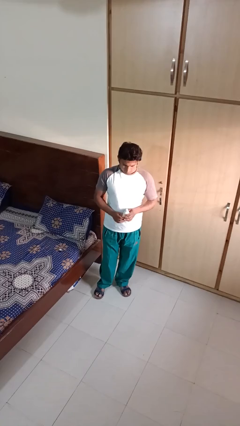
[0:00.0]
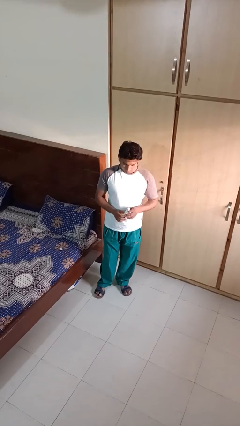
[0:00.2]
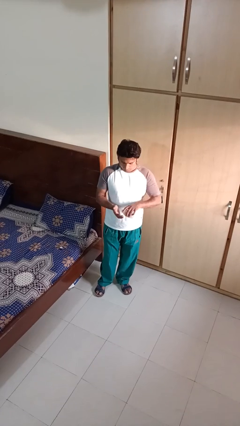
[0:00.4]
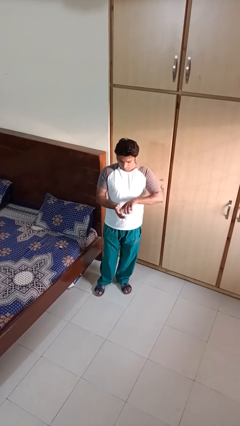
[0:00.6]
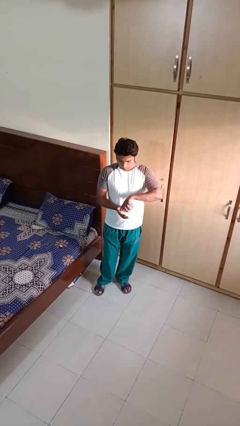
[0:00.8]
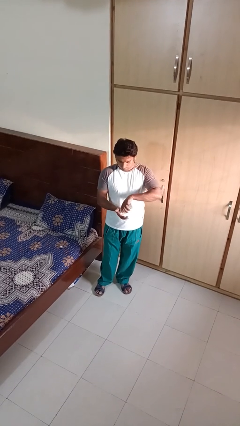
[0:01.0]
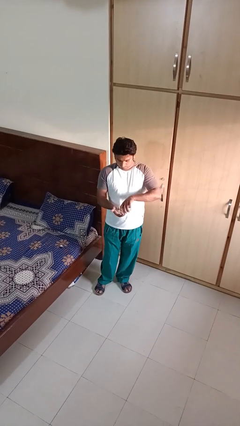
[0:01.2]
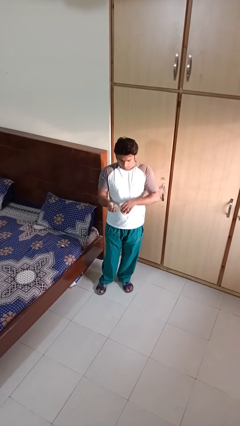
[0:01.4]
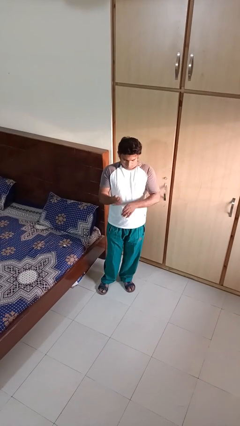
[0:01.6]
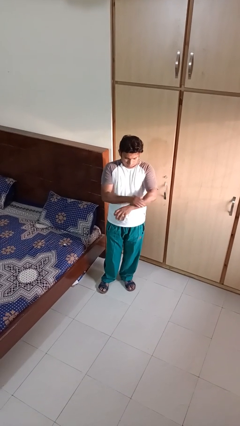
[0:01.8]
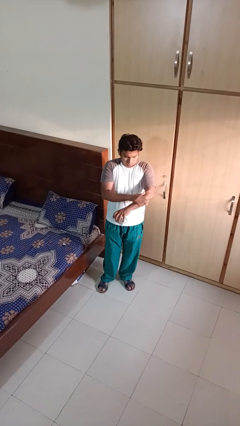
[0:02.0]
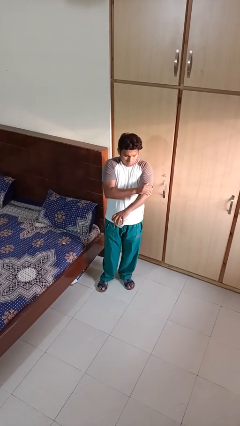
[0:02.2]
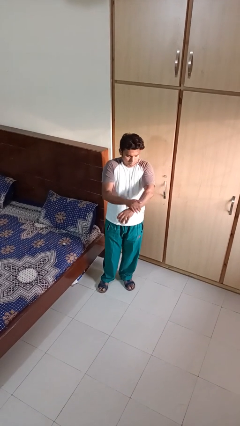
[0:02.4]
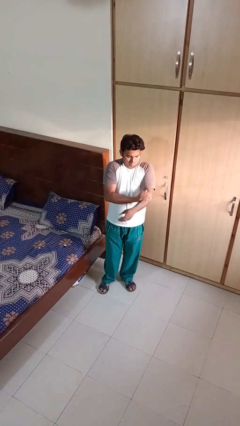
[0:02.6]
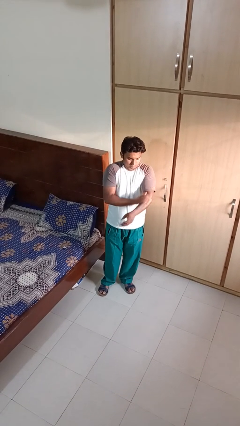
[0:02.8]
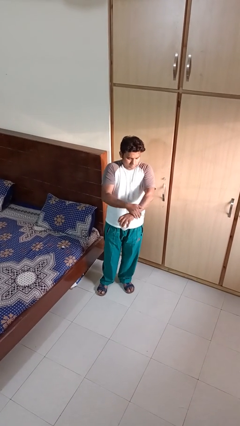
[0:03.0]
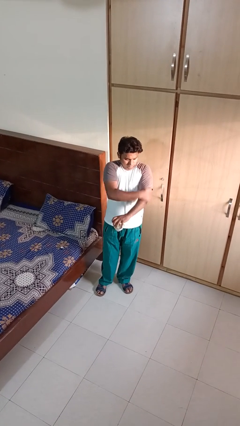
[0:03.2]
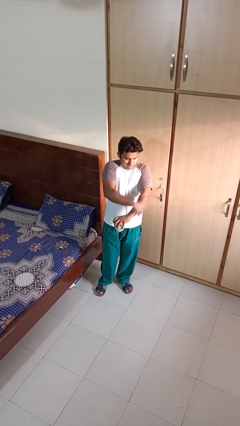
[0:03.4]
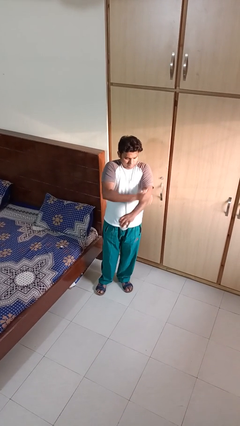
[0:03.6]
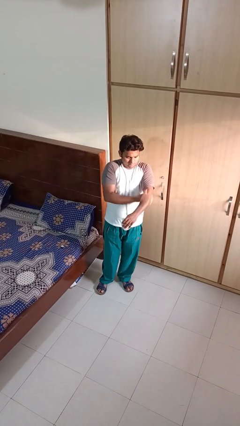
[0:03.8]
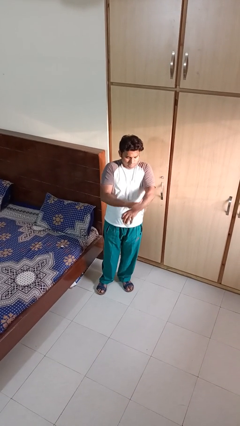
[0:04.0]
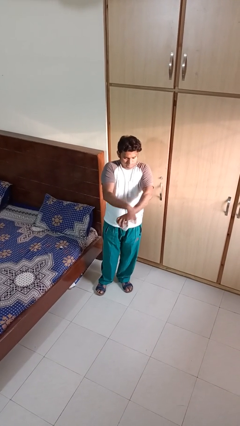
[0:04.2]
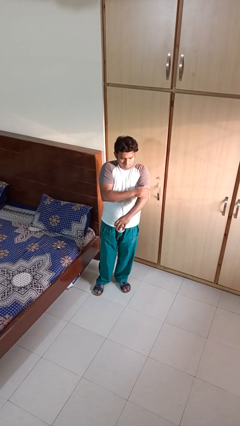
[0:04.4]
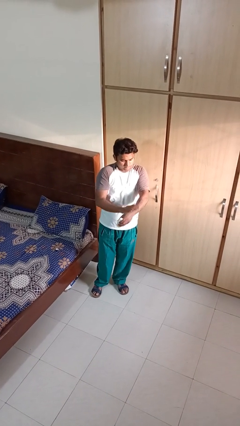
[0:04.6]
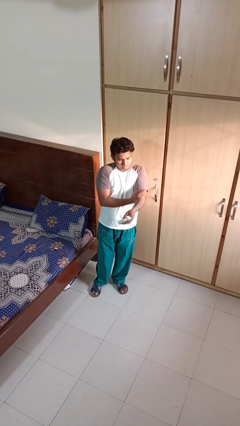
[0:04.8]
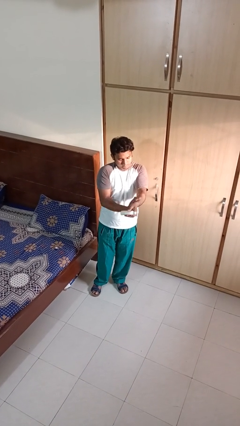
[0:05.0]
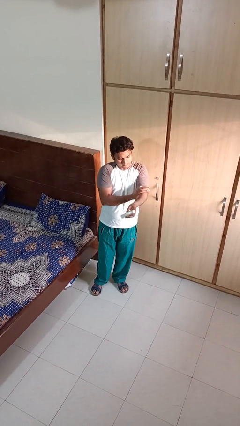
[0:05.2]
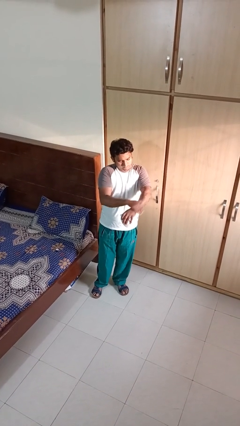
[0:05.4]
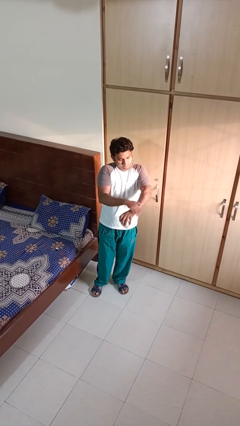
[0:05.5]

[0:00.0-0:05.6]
person applies sunscreen

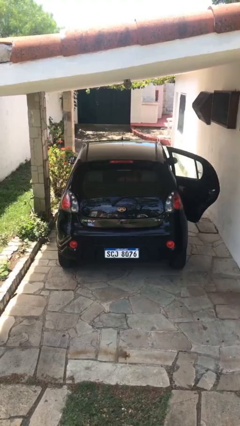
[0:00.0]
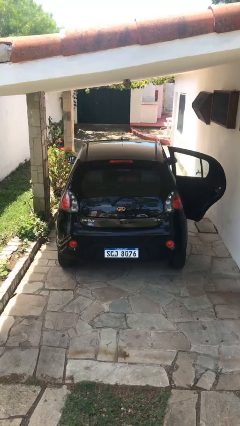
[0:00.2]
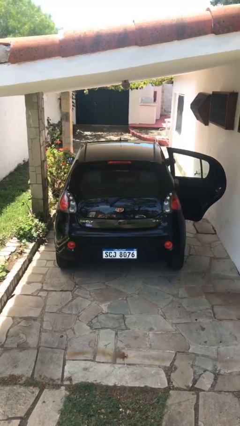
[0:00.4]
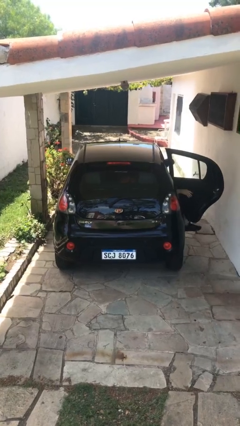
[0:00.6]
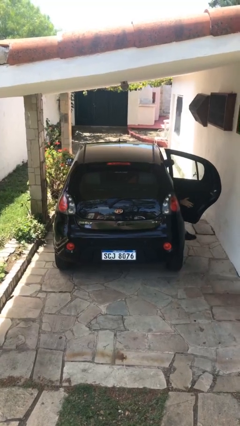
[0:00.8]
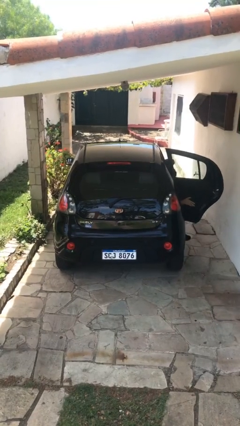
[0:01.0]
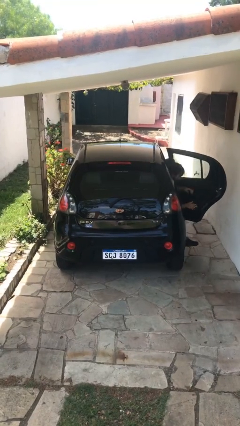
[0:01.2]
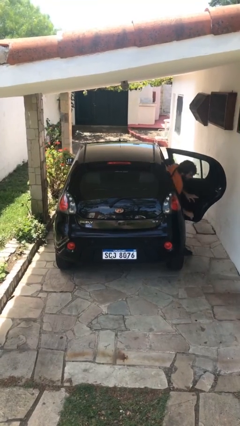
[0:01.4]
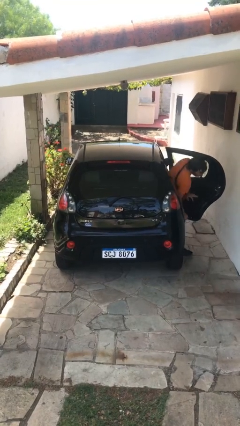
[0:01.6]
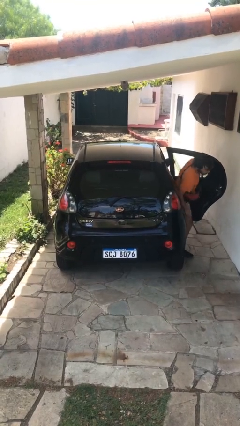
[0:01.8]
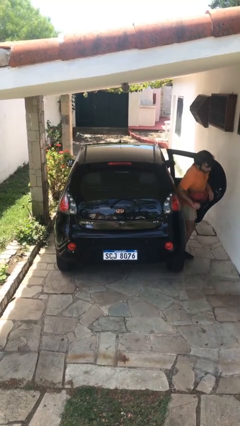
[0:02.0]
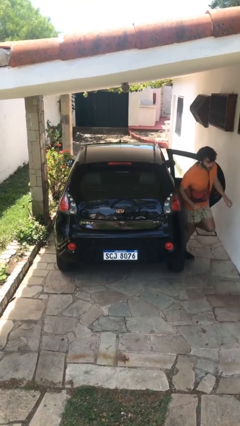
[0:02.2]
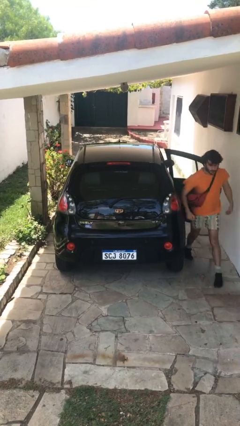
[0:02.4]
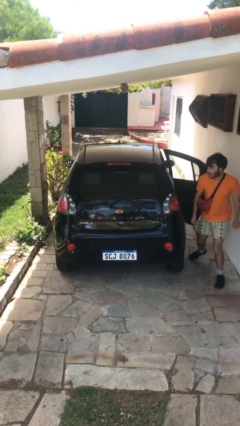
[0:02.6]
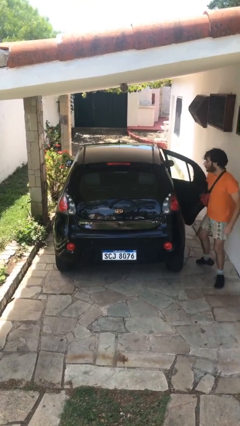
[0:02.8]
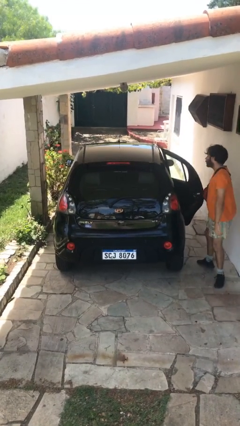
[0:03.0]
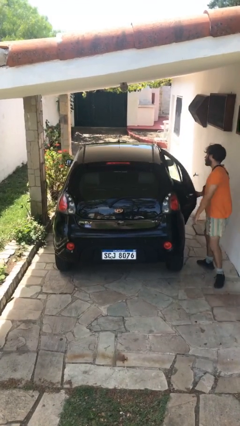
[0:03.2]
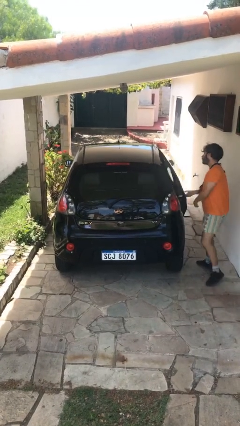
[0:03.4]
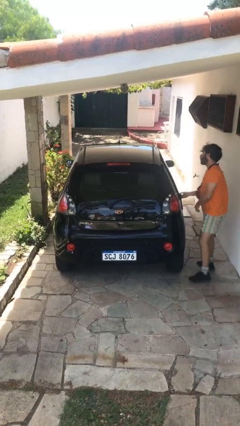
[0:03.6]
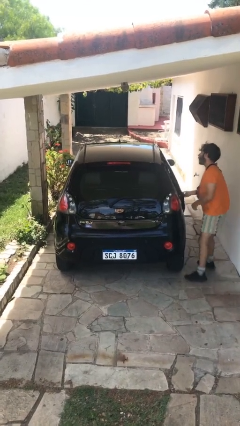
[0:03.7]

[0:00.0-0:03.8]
car drops off person

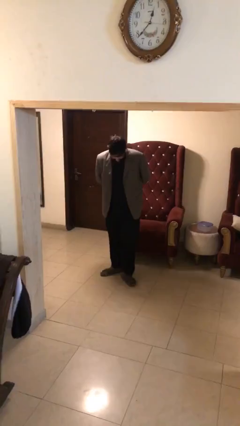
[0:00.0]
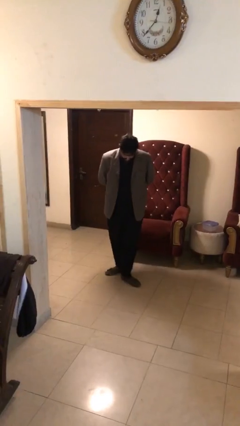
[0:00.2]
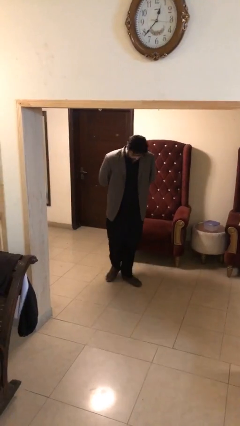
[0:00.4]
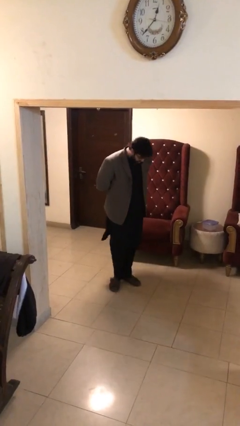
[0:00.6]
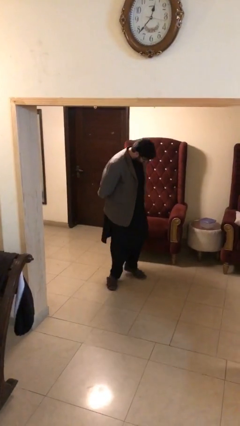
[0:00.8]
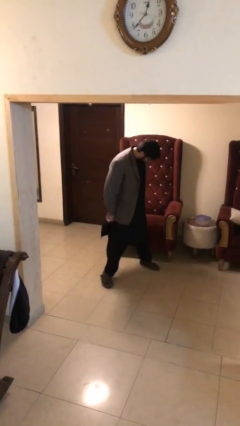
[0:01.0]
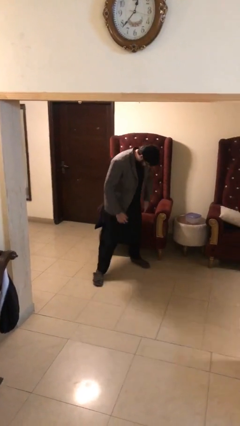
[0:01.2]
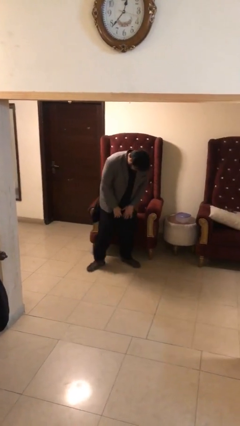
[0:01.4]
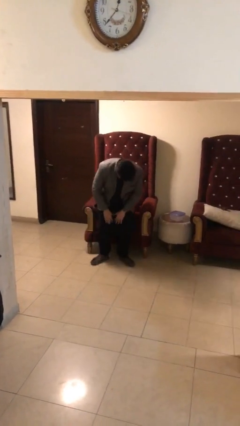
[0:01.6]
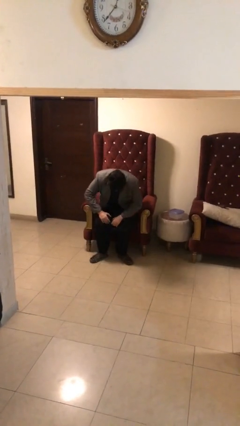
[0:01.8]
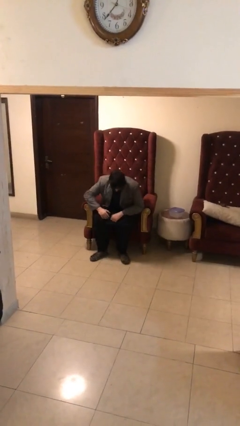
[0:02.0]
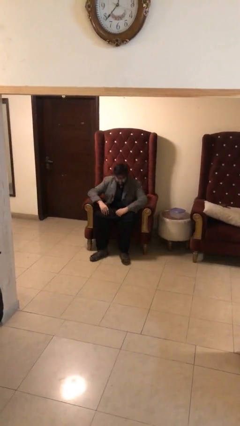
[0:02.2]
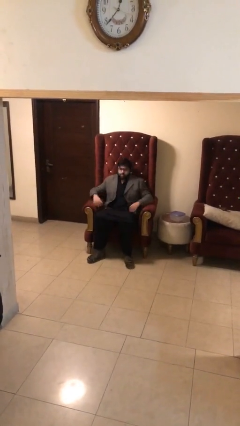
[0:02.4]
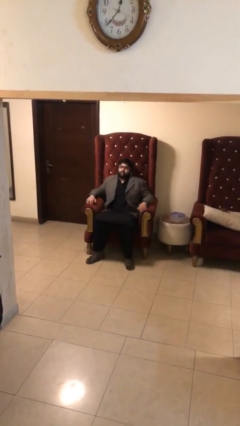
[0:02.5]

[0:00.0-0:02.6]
person sits down

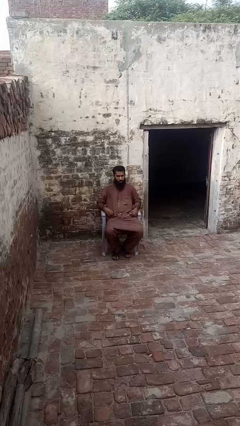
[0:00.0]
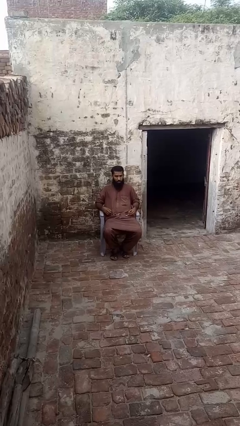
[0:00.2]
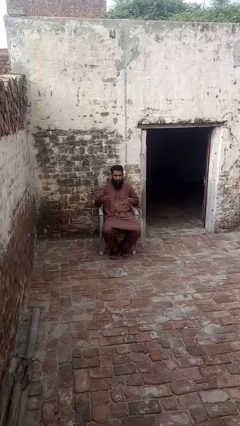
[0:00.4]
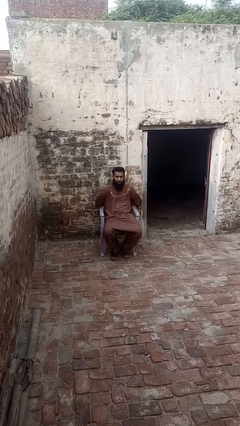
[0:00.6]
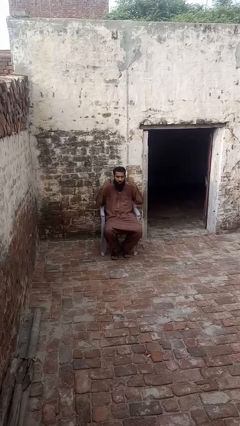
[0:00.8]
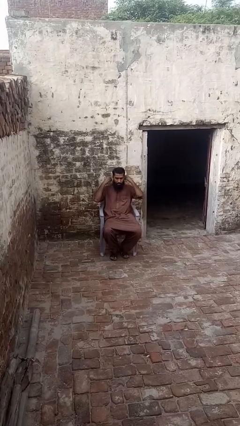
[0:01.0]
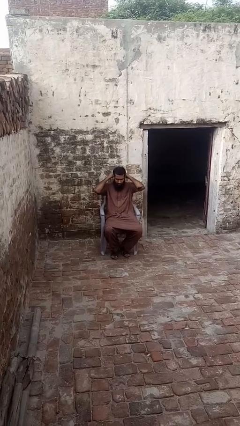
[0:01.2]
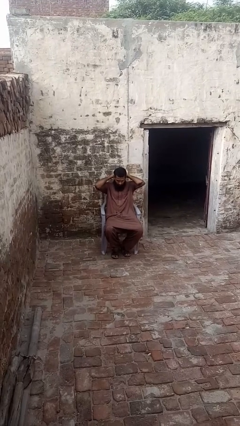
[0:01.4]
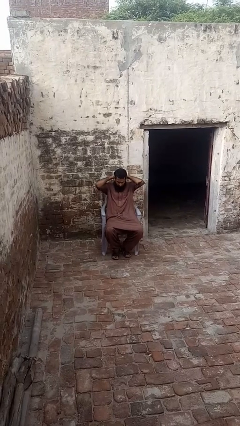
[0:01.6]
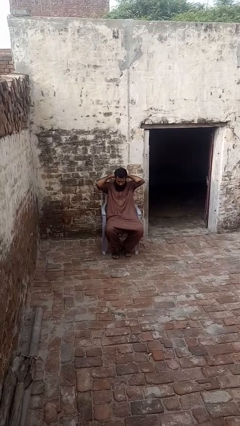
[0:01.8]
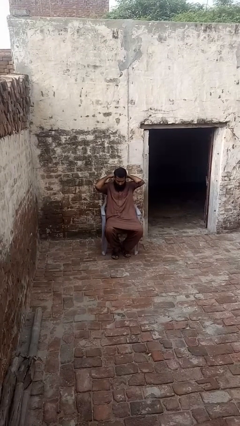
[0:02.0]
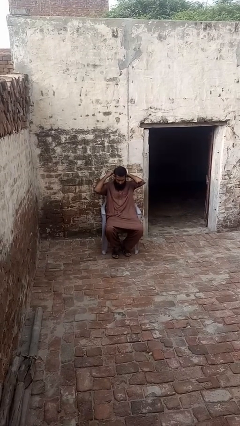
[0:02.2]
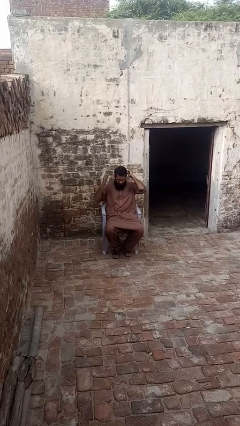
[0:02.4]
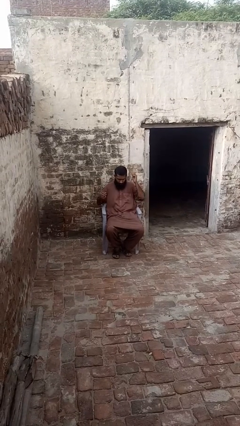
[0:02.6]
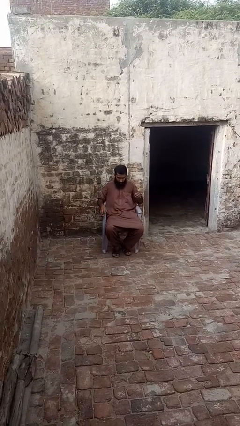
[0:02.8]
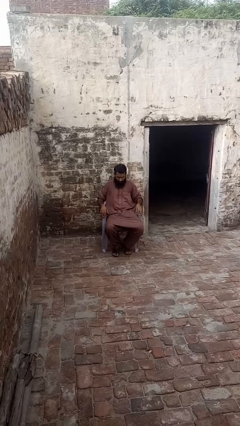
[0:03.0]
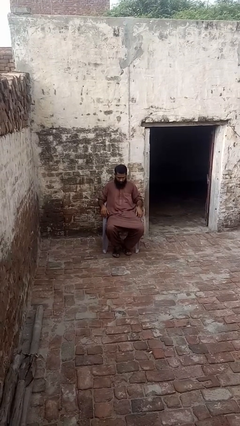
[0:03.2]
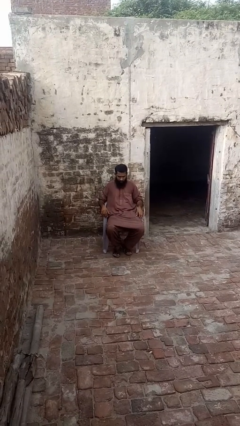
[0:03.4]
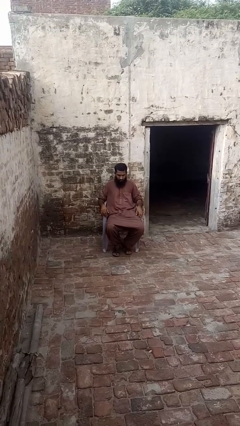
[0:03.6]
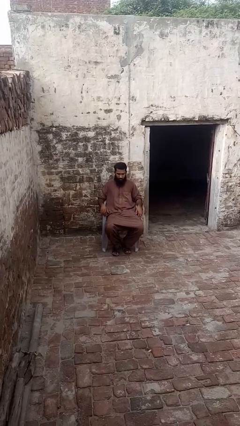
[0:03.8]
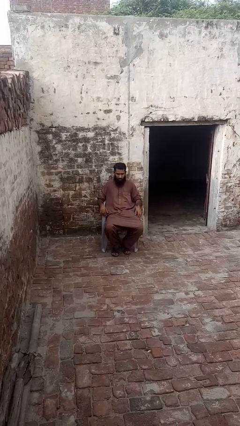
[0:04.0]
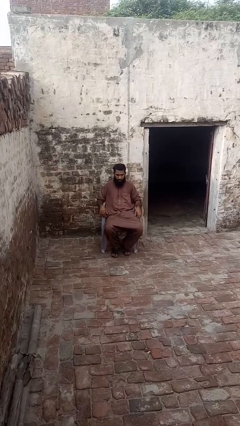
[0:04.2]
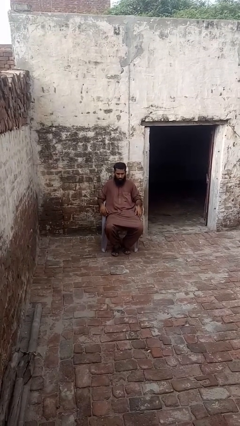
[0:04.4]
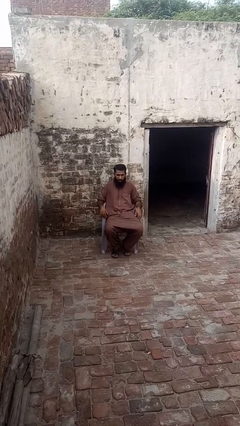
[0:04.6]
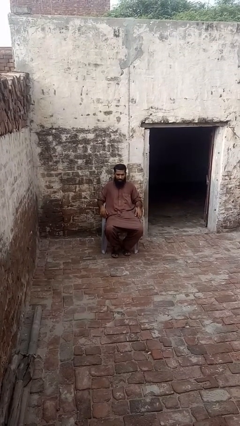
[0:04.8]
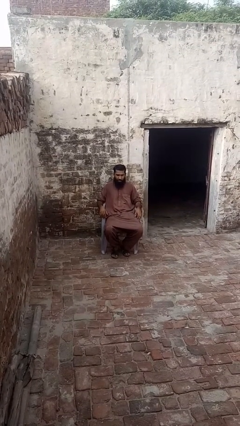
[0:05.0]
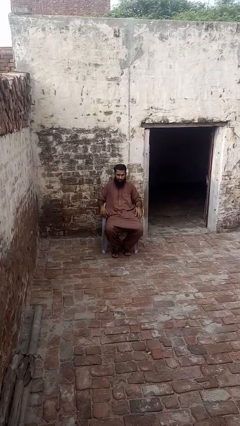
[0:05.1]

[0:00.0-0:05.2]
person puts on necklace

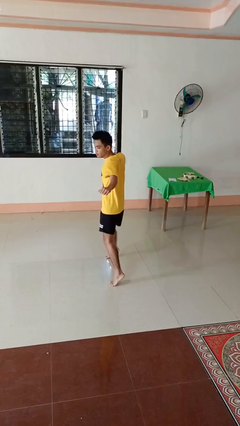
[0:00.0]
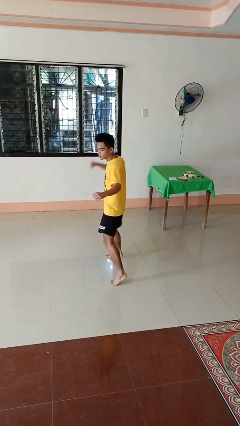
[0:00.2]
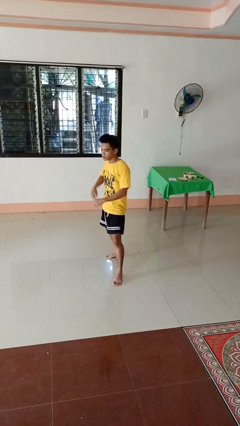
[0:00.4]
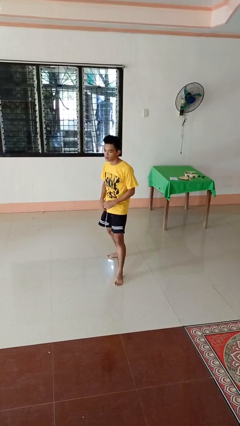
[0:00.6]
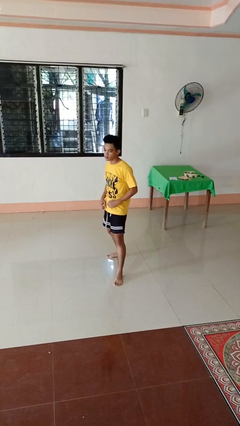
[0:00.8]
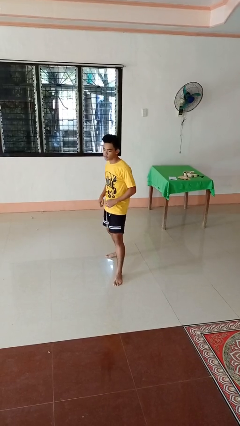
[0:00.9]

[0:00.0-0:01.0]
person karate chop
